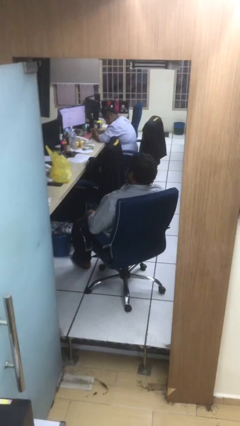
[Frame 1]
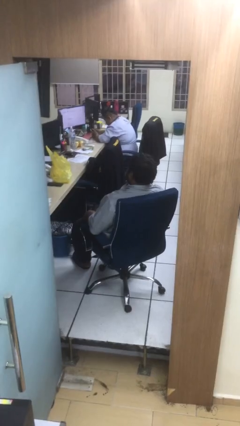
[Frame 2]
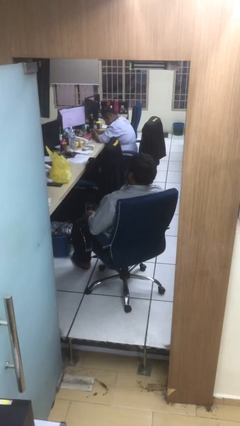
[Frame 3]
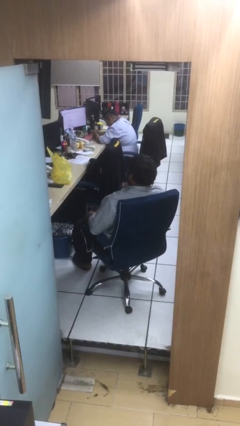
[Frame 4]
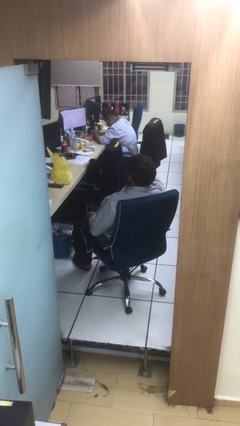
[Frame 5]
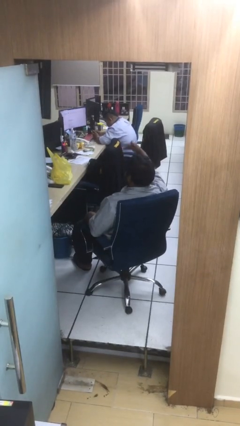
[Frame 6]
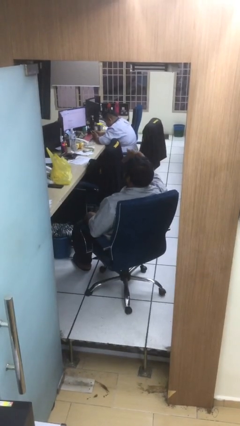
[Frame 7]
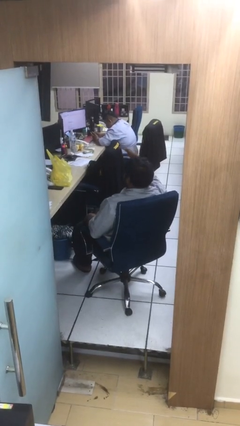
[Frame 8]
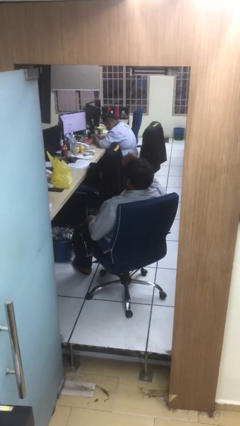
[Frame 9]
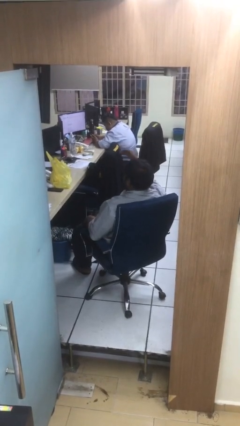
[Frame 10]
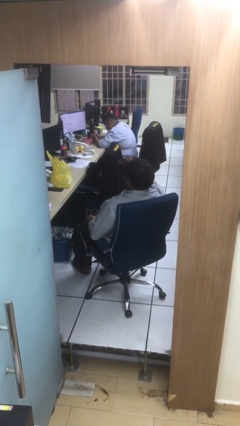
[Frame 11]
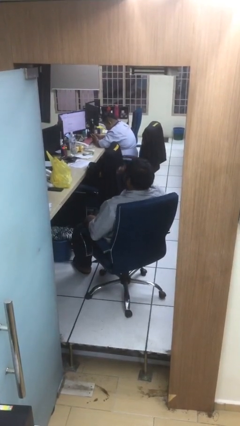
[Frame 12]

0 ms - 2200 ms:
person gestures come here

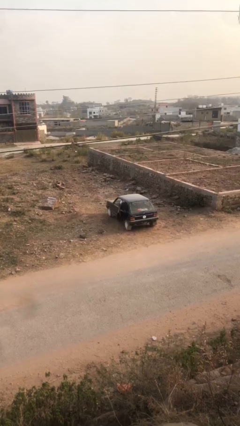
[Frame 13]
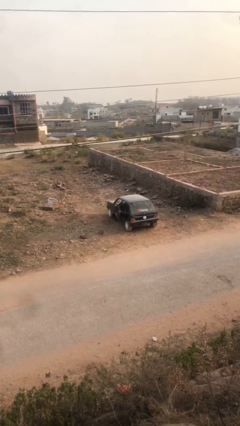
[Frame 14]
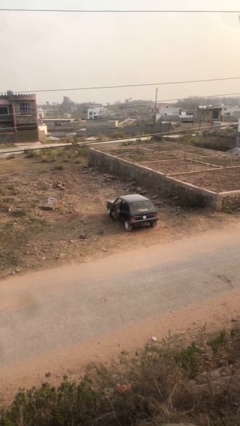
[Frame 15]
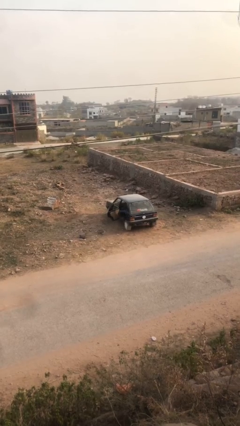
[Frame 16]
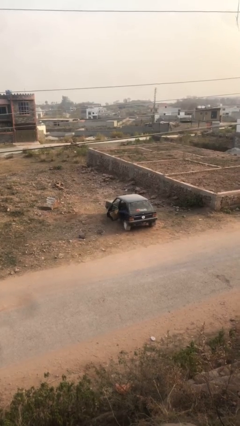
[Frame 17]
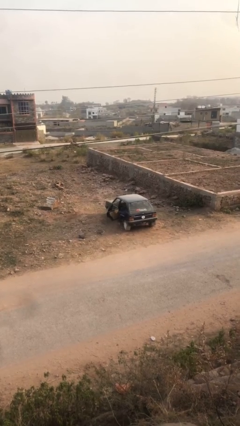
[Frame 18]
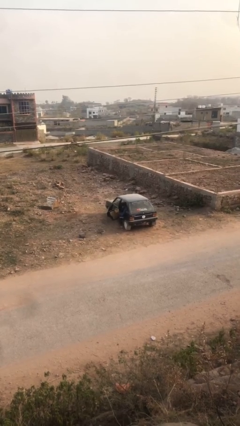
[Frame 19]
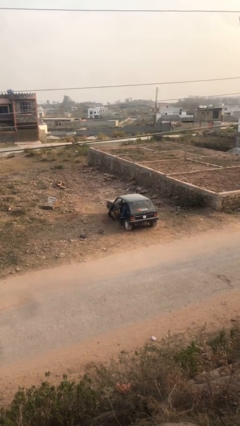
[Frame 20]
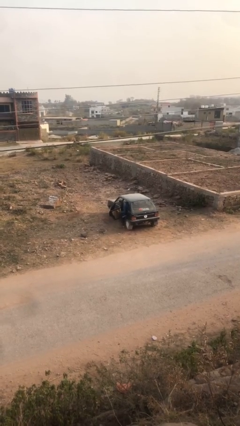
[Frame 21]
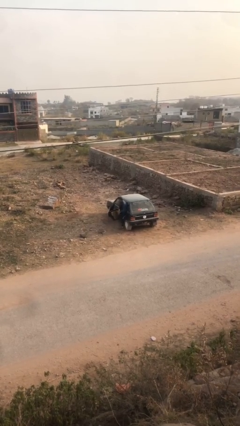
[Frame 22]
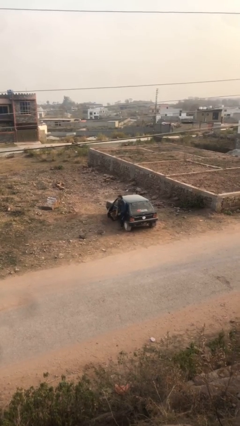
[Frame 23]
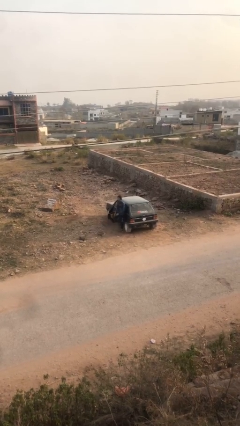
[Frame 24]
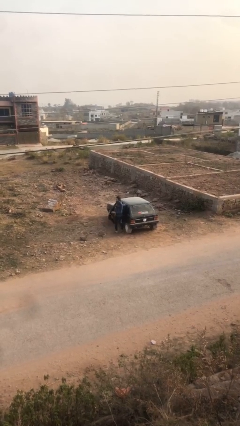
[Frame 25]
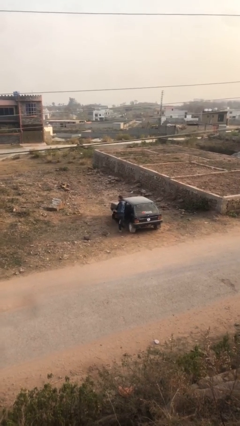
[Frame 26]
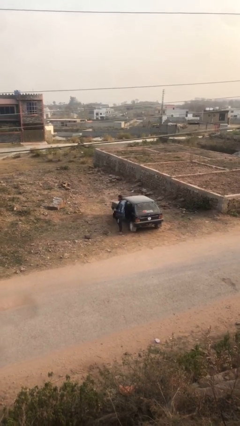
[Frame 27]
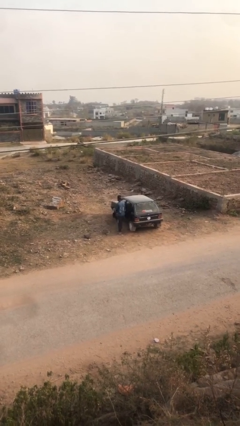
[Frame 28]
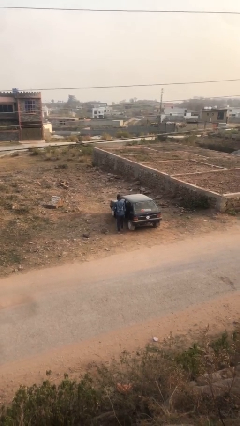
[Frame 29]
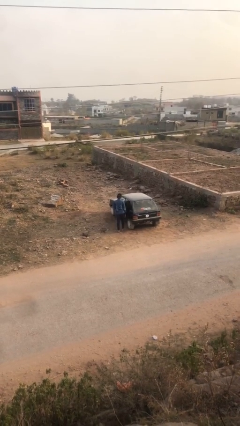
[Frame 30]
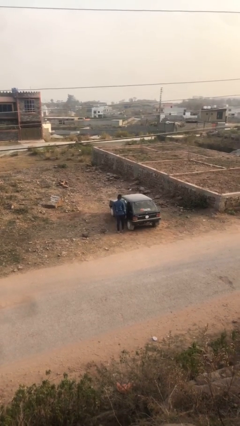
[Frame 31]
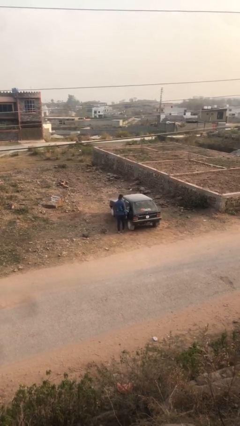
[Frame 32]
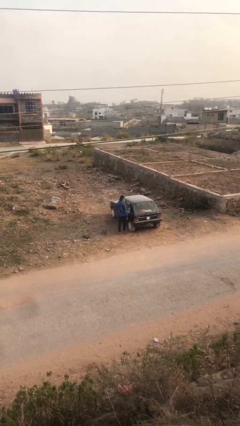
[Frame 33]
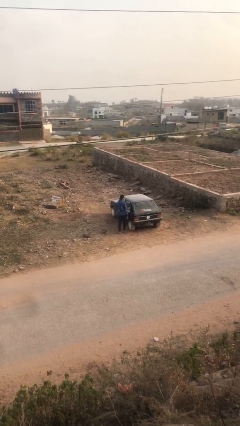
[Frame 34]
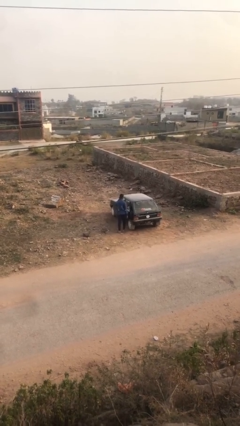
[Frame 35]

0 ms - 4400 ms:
car drops off person

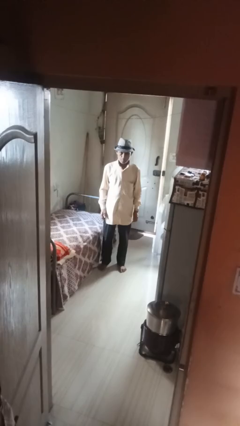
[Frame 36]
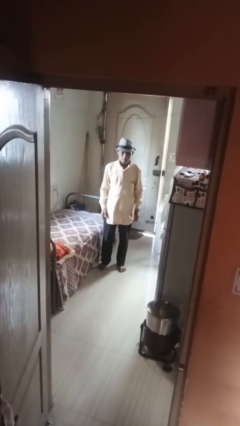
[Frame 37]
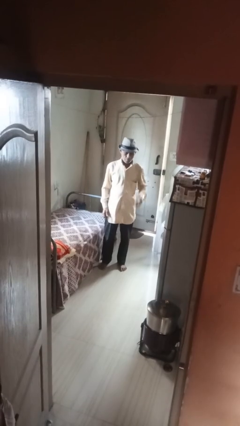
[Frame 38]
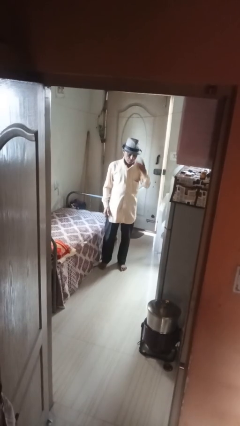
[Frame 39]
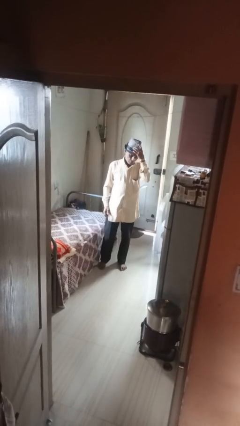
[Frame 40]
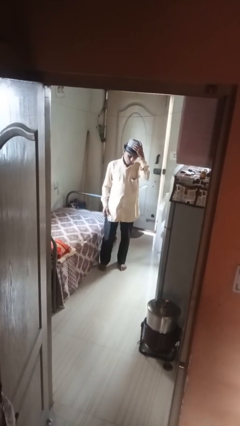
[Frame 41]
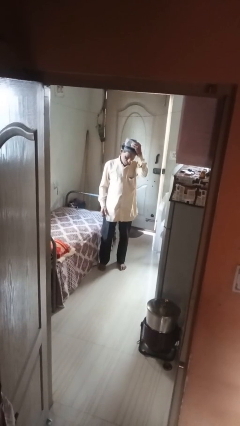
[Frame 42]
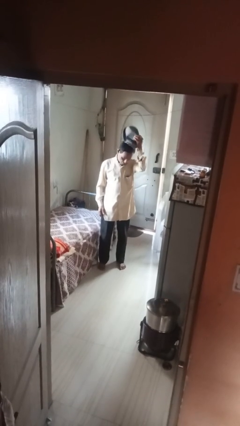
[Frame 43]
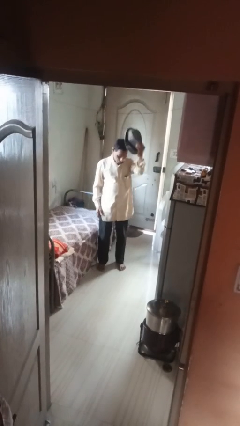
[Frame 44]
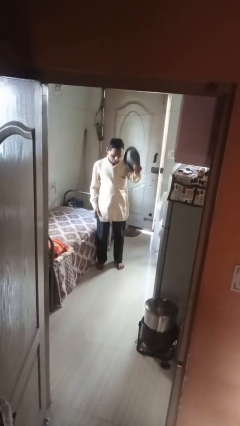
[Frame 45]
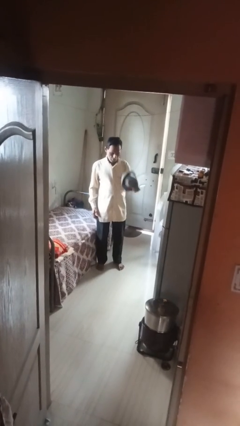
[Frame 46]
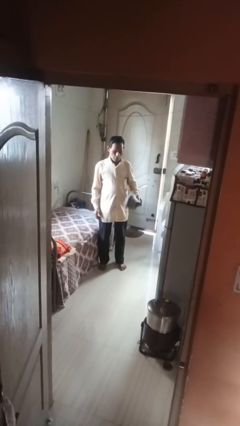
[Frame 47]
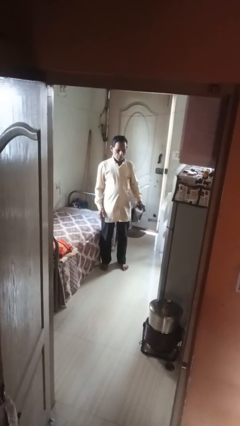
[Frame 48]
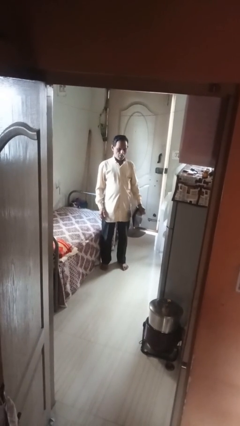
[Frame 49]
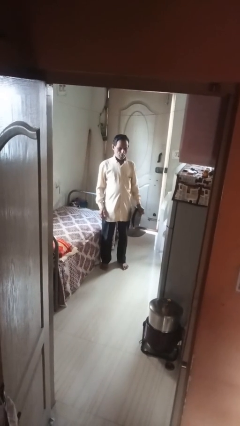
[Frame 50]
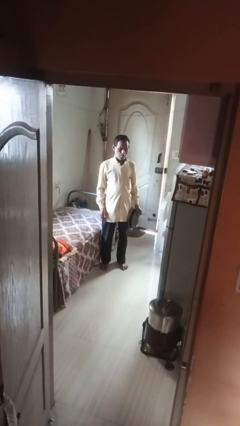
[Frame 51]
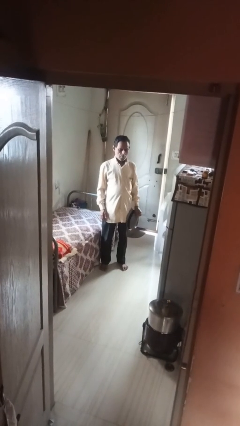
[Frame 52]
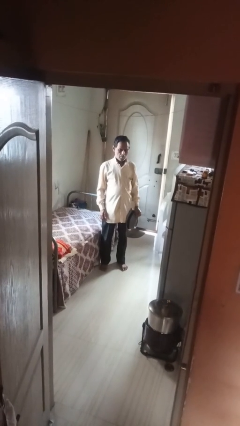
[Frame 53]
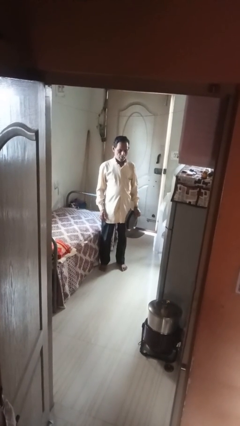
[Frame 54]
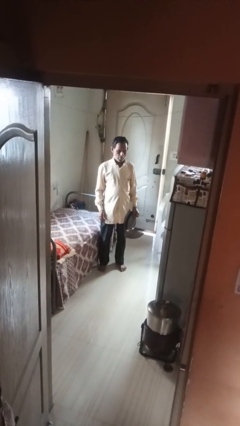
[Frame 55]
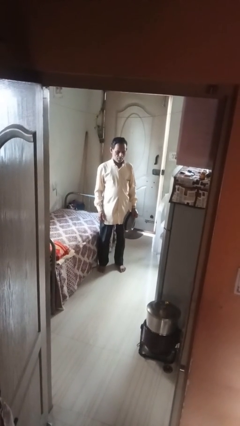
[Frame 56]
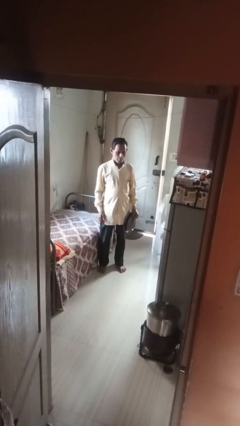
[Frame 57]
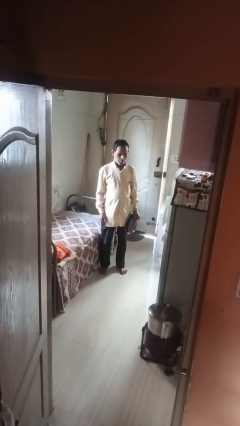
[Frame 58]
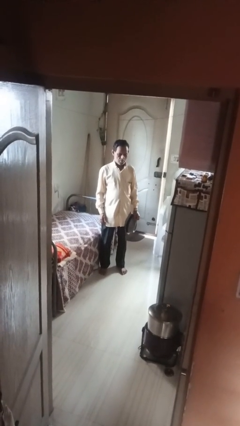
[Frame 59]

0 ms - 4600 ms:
person takes off hat

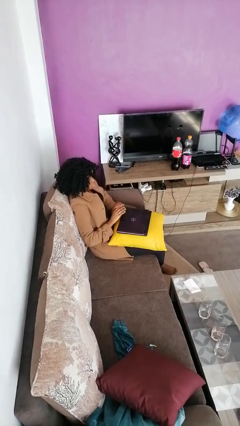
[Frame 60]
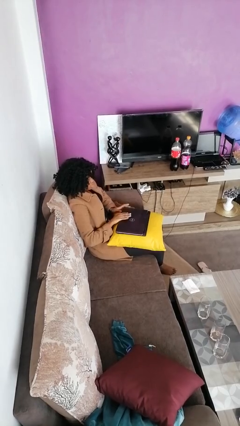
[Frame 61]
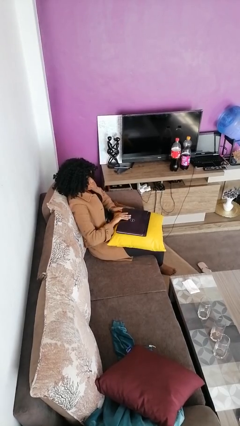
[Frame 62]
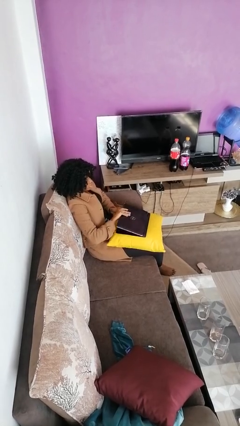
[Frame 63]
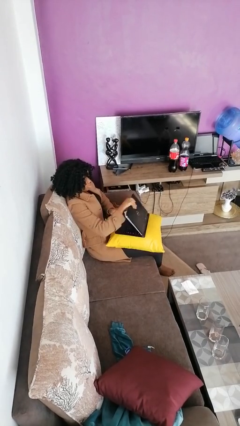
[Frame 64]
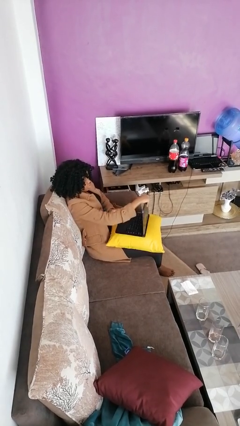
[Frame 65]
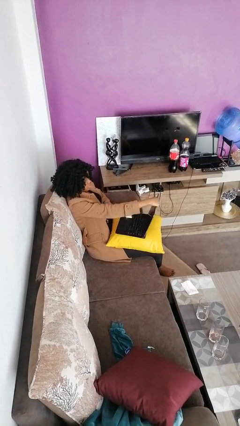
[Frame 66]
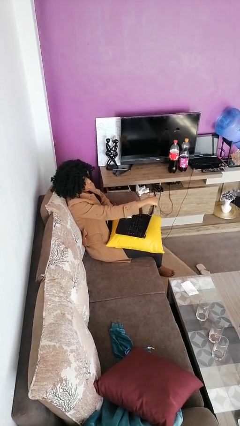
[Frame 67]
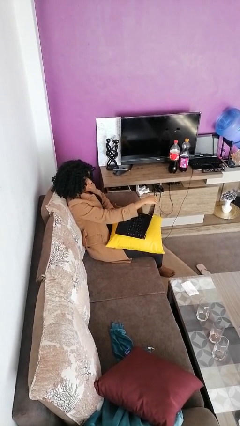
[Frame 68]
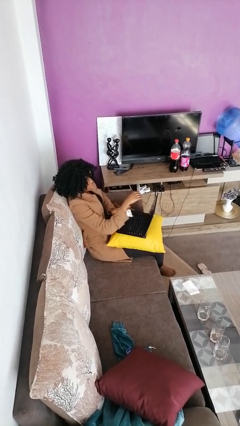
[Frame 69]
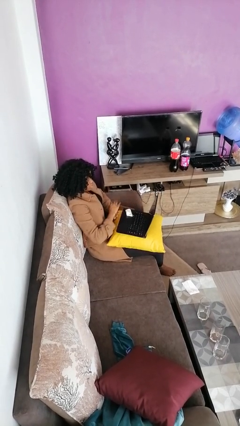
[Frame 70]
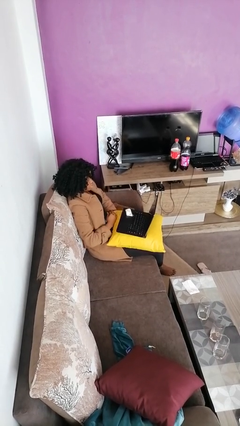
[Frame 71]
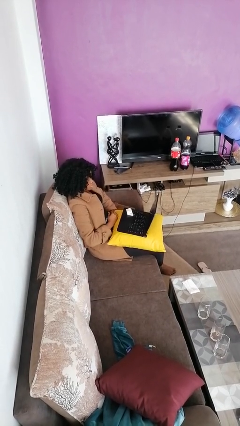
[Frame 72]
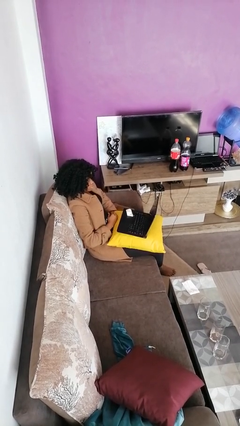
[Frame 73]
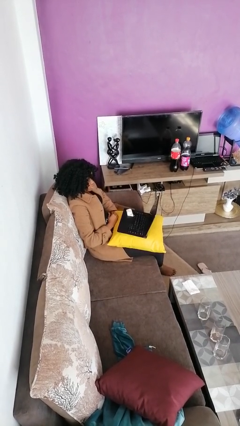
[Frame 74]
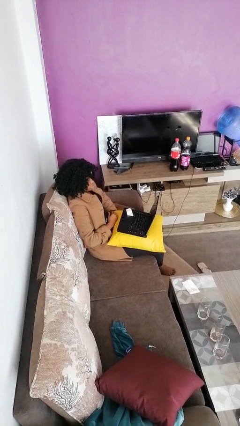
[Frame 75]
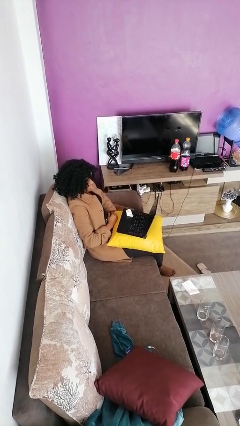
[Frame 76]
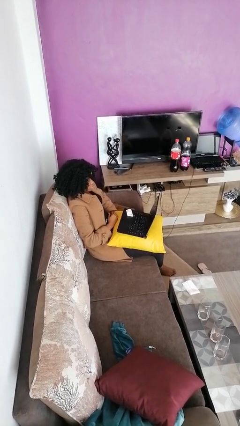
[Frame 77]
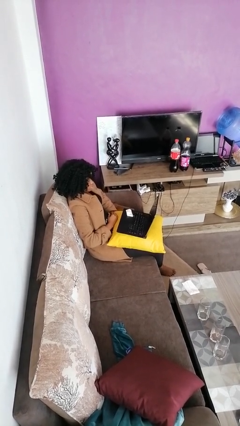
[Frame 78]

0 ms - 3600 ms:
person opens laptop

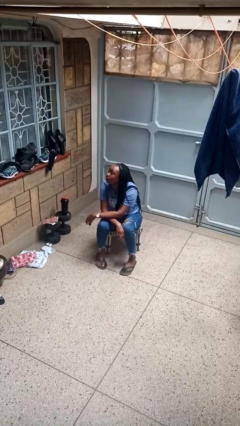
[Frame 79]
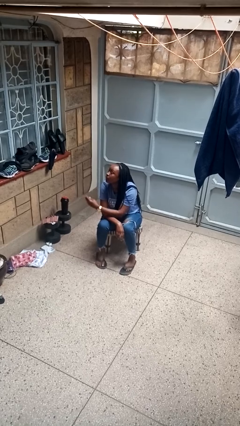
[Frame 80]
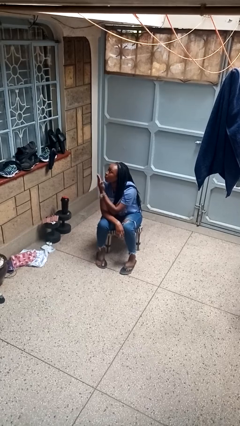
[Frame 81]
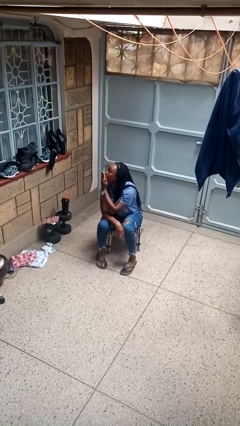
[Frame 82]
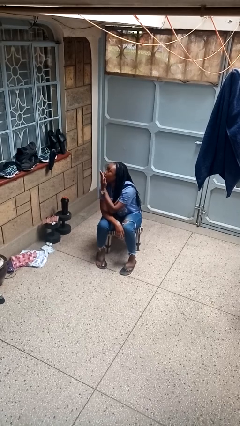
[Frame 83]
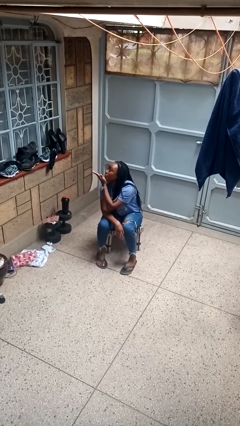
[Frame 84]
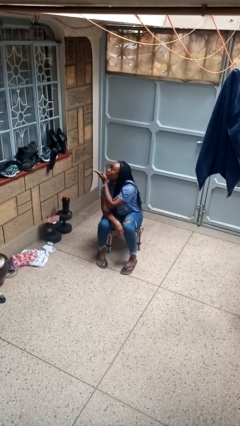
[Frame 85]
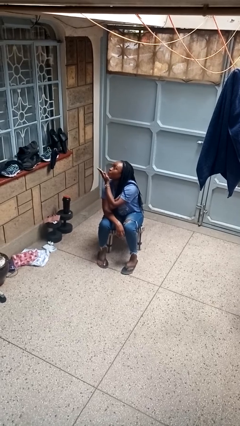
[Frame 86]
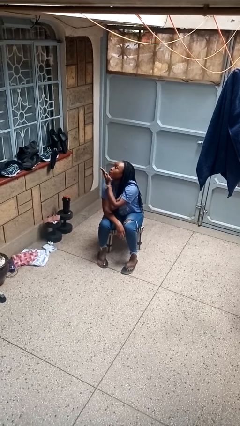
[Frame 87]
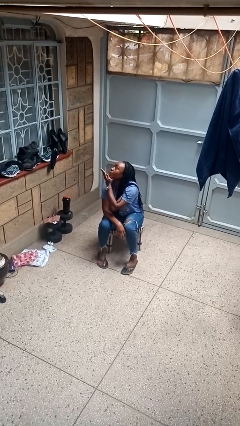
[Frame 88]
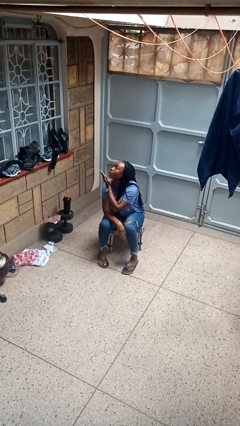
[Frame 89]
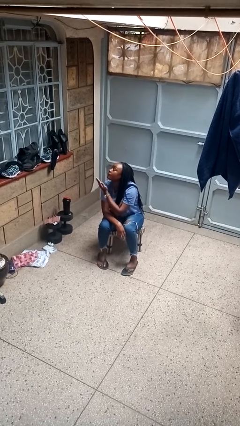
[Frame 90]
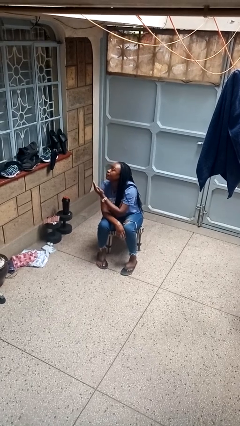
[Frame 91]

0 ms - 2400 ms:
person gestures blow kiss

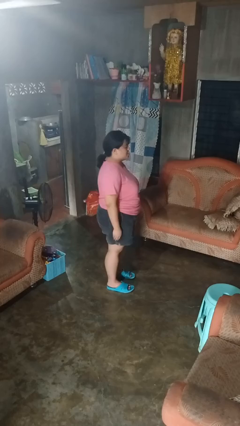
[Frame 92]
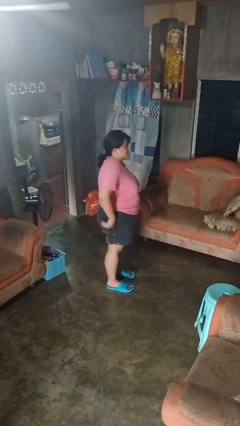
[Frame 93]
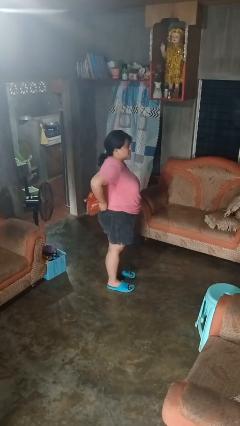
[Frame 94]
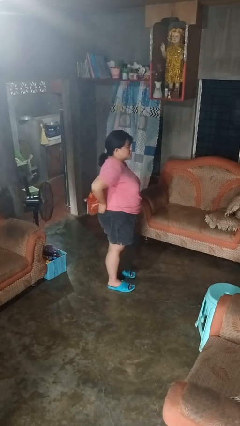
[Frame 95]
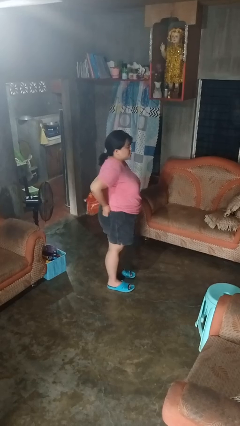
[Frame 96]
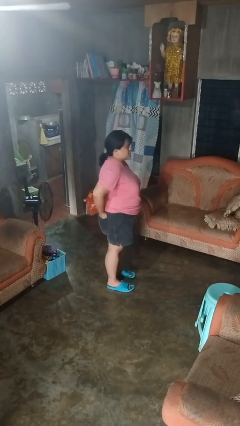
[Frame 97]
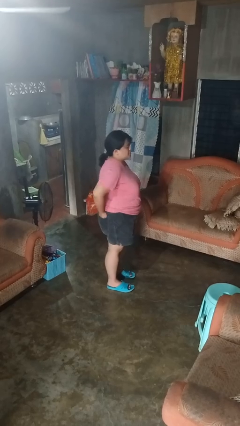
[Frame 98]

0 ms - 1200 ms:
person puts hands in back pockets
